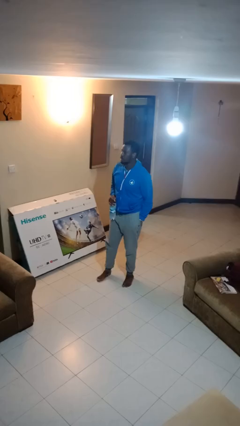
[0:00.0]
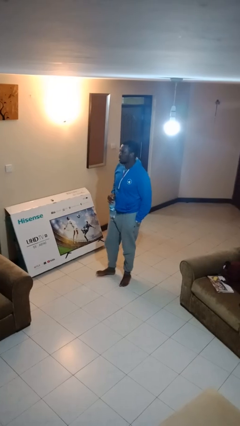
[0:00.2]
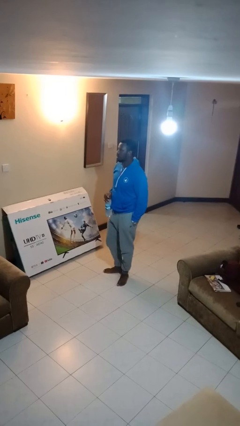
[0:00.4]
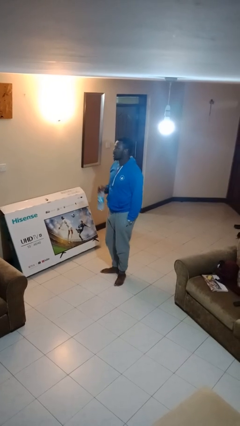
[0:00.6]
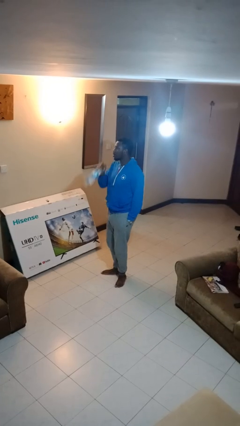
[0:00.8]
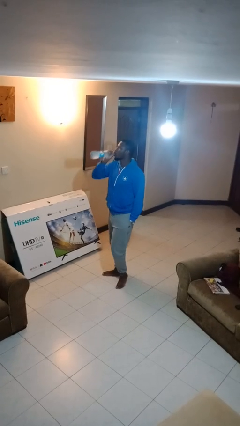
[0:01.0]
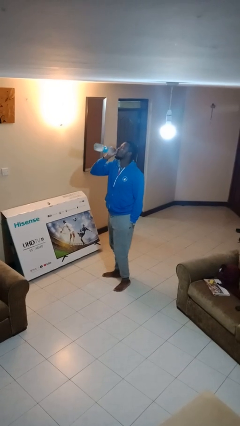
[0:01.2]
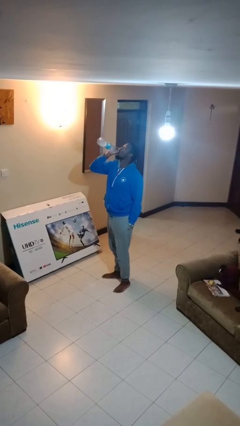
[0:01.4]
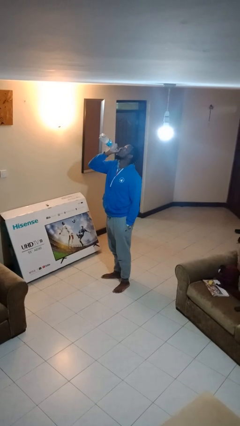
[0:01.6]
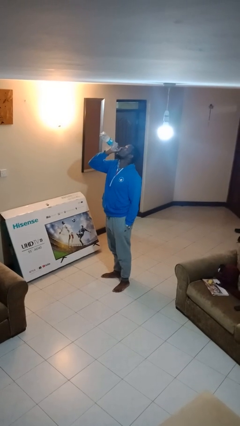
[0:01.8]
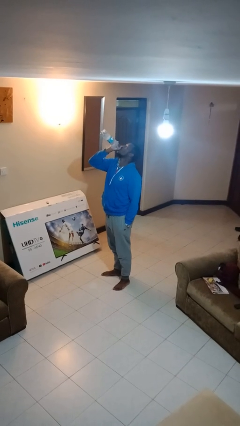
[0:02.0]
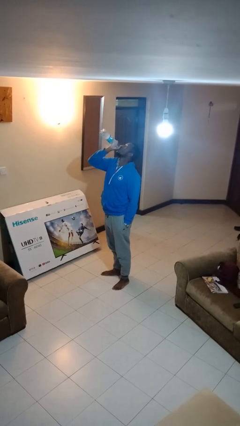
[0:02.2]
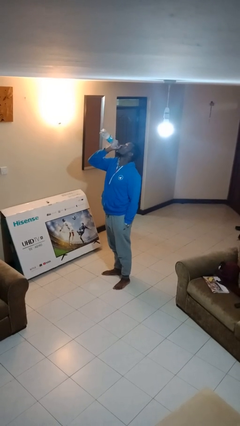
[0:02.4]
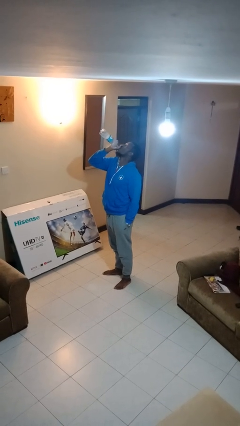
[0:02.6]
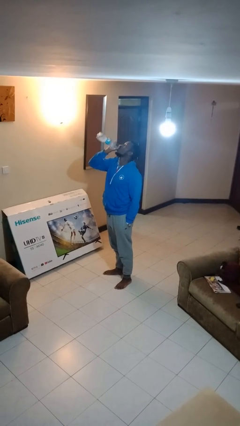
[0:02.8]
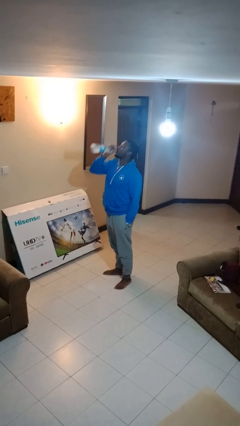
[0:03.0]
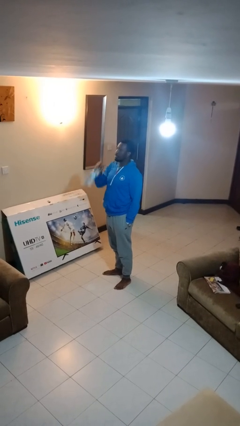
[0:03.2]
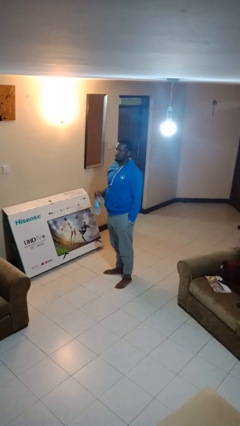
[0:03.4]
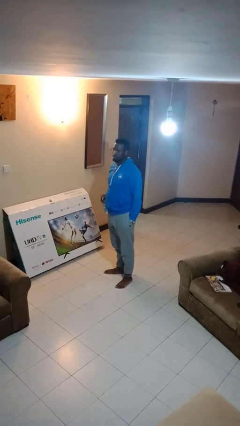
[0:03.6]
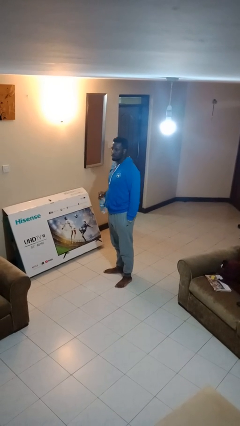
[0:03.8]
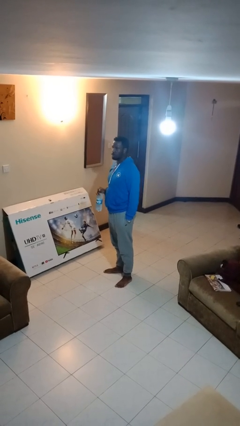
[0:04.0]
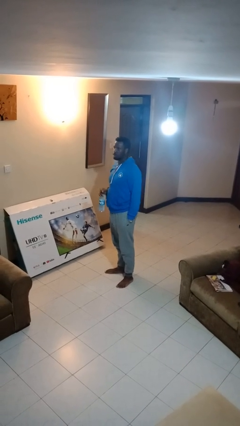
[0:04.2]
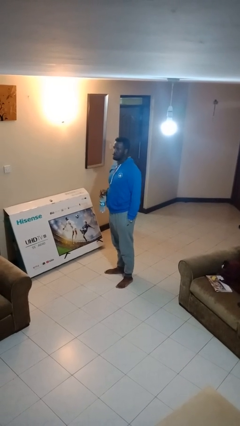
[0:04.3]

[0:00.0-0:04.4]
person drinks from bottle

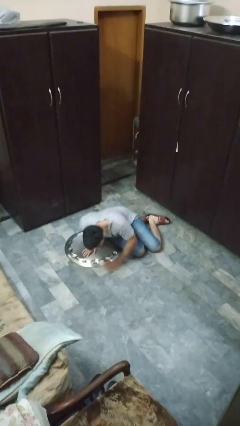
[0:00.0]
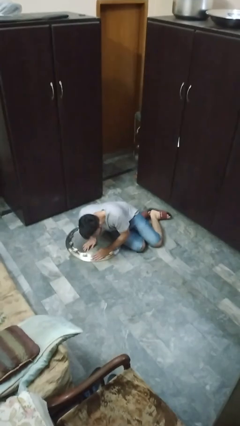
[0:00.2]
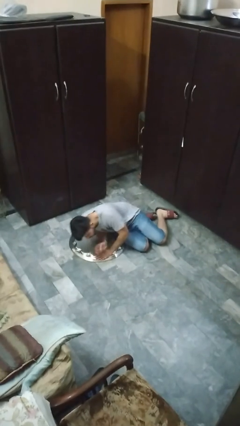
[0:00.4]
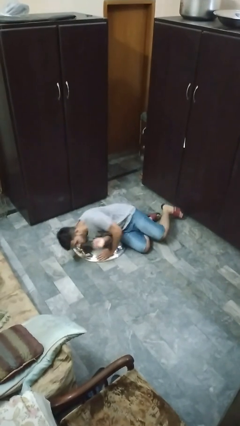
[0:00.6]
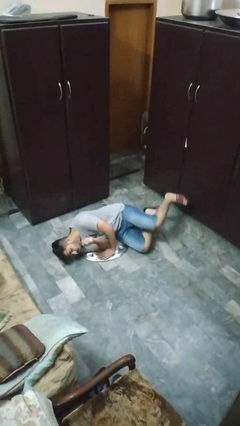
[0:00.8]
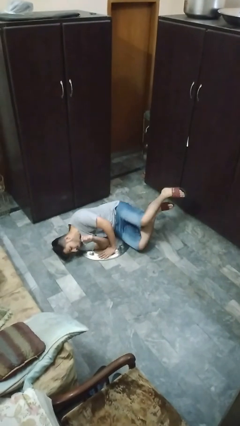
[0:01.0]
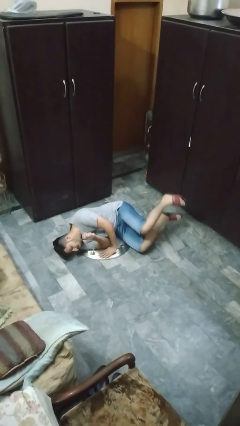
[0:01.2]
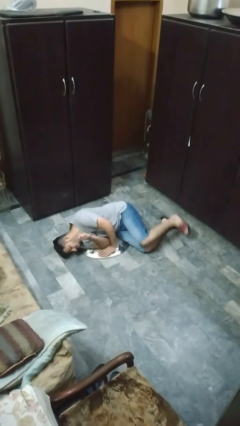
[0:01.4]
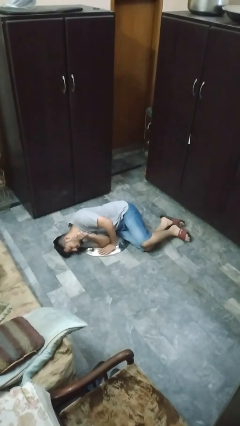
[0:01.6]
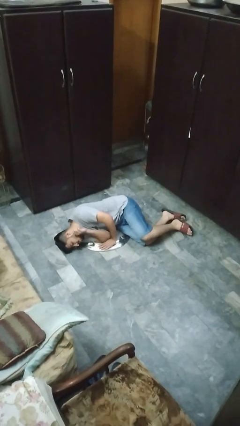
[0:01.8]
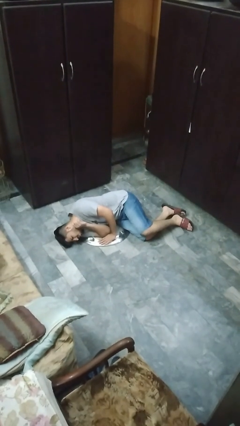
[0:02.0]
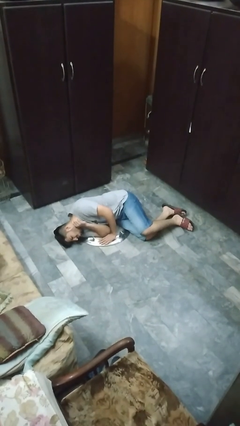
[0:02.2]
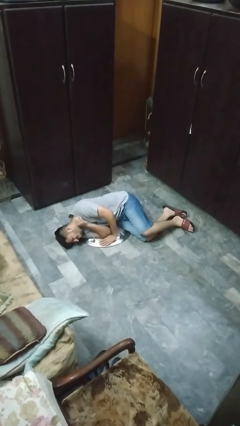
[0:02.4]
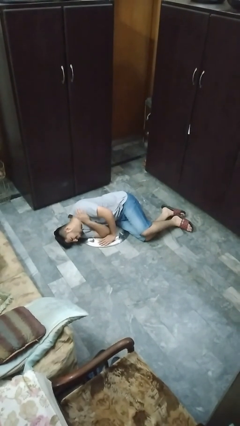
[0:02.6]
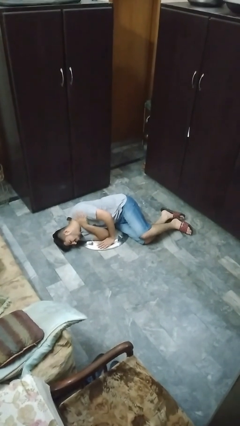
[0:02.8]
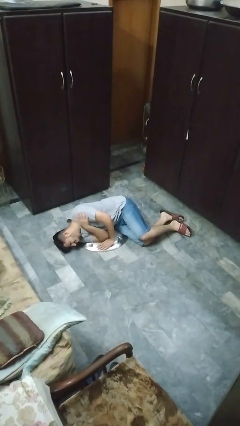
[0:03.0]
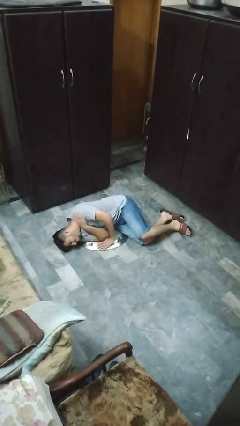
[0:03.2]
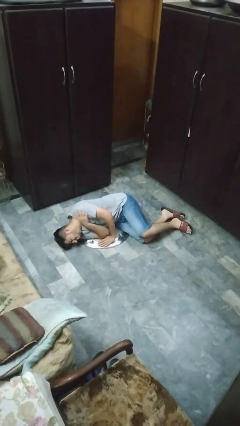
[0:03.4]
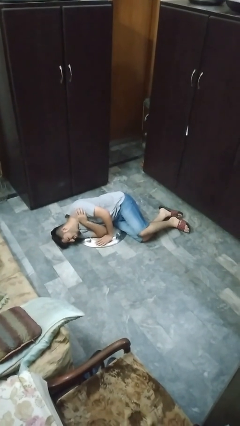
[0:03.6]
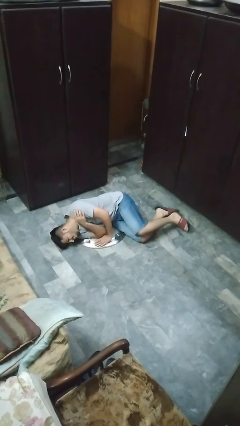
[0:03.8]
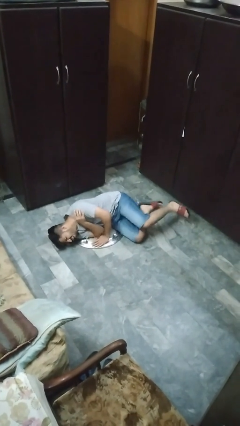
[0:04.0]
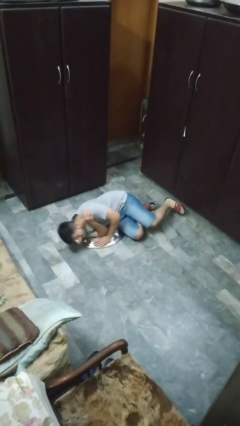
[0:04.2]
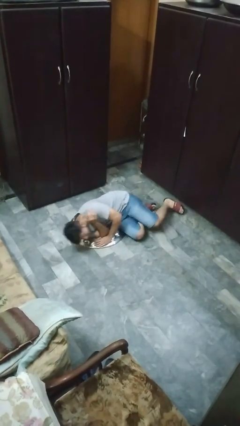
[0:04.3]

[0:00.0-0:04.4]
person lies down on floor

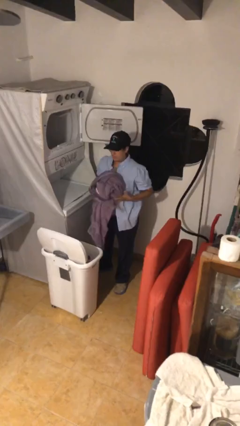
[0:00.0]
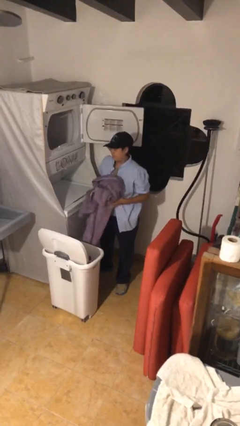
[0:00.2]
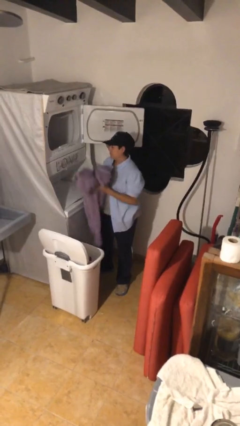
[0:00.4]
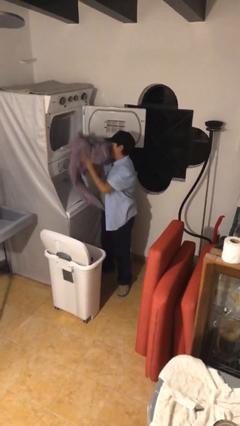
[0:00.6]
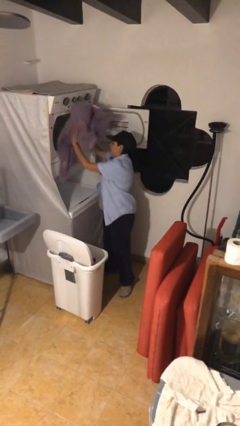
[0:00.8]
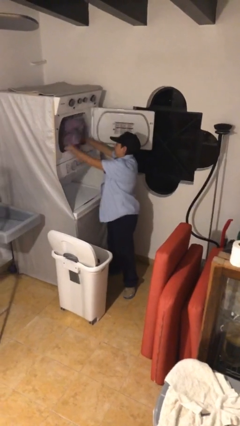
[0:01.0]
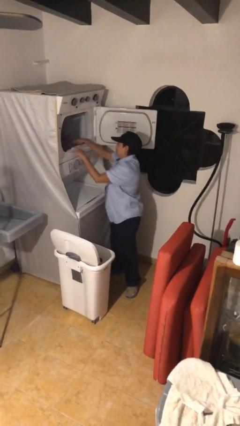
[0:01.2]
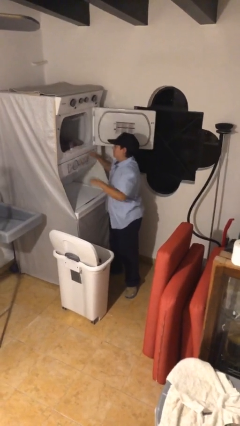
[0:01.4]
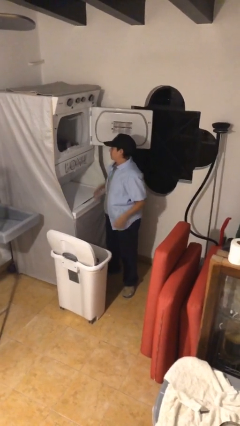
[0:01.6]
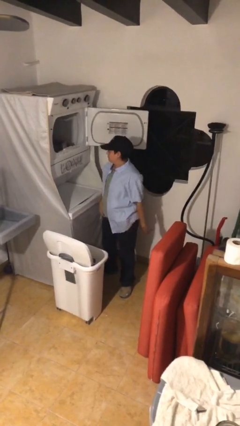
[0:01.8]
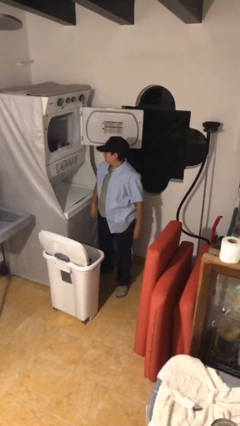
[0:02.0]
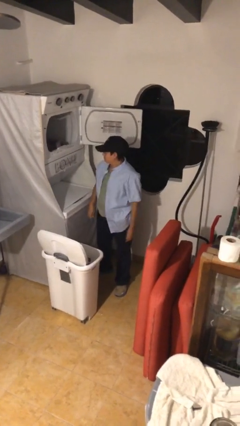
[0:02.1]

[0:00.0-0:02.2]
person loads dryer

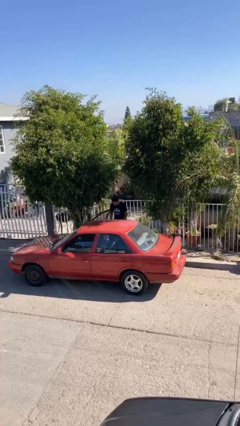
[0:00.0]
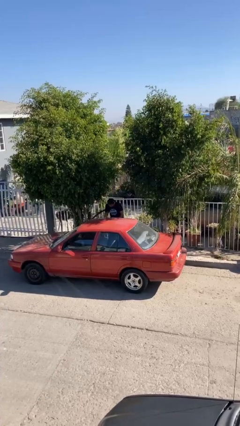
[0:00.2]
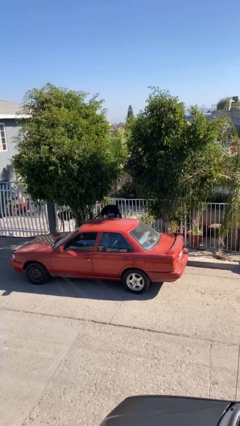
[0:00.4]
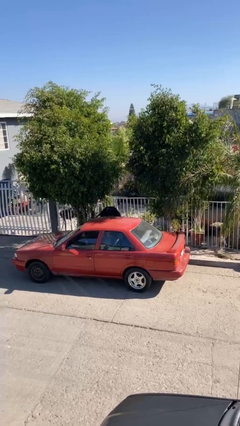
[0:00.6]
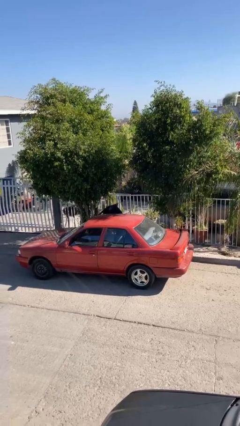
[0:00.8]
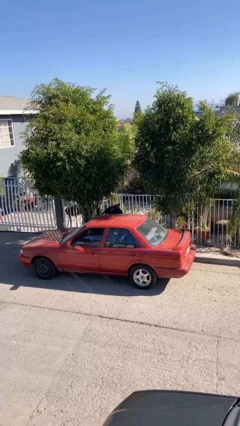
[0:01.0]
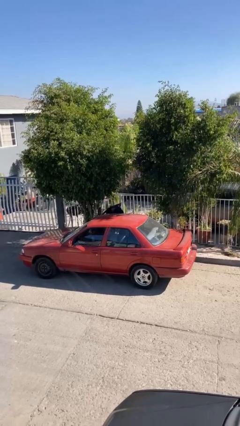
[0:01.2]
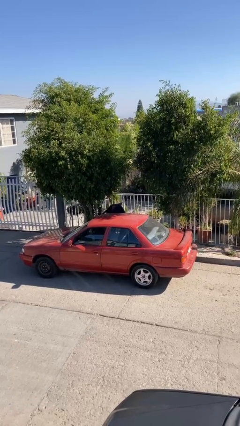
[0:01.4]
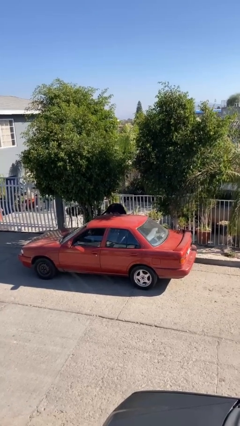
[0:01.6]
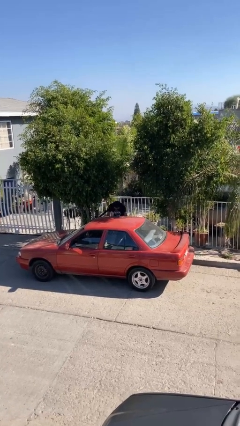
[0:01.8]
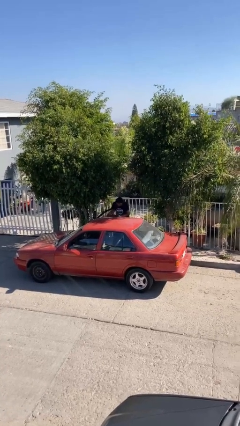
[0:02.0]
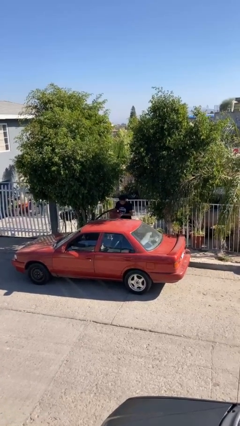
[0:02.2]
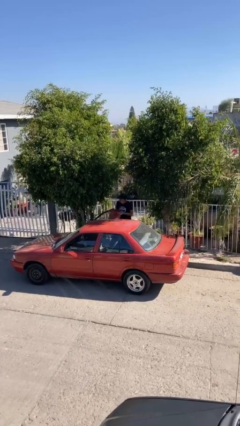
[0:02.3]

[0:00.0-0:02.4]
person unloads car

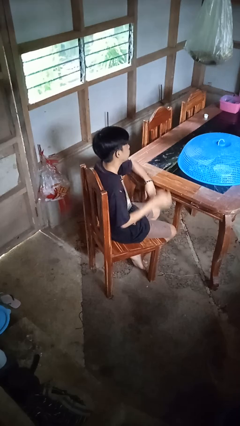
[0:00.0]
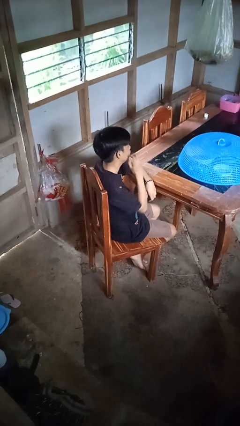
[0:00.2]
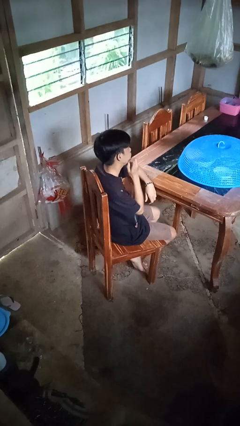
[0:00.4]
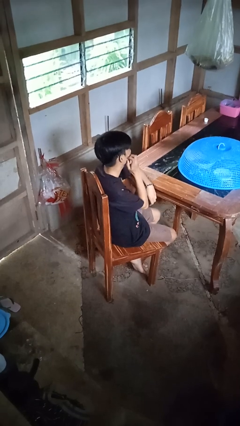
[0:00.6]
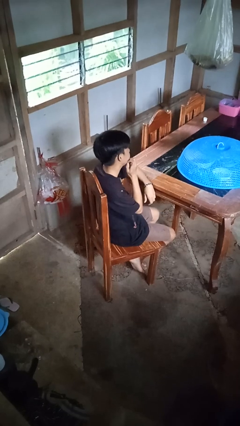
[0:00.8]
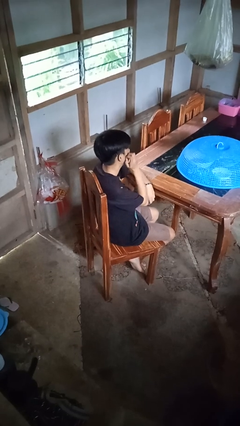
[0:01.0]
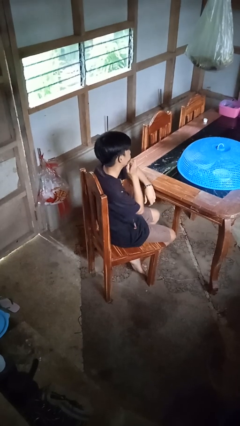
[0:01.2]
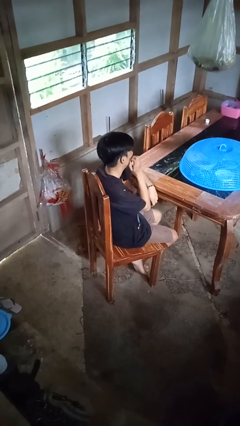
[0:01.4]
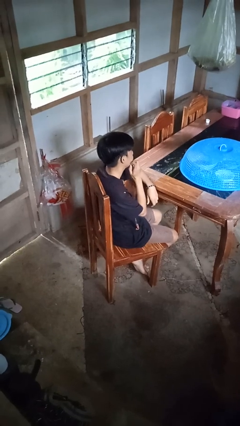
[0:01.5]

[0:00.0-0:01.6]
person scratches face

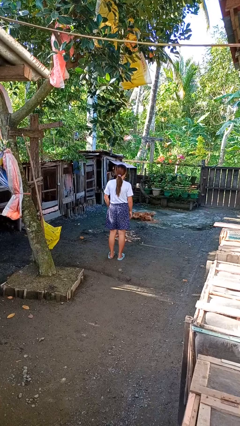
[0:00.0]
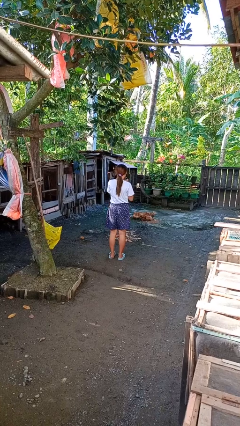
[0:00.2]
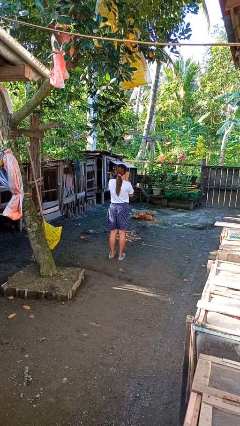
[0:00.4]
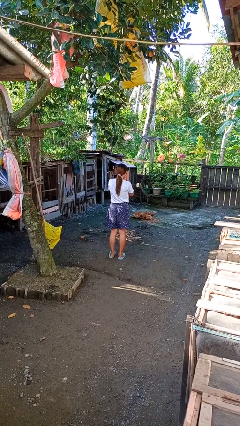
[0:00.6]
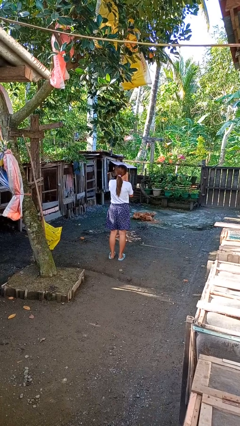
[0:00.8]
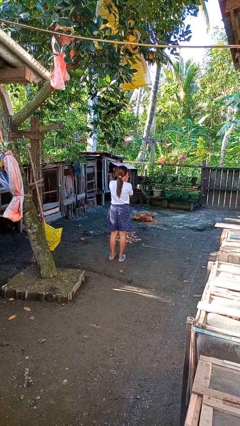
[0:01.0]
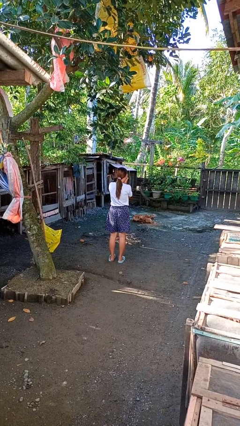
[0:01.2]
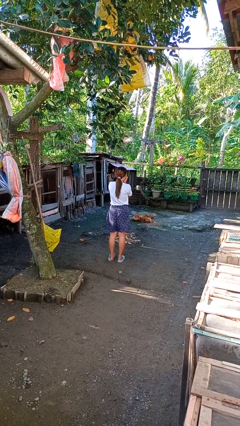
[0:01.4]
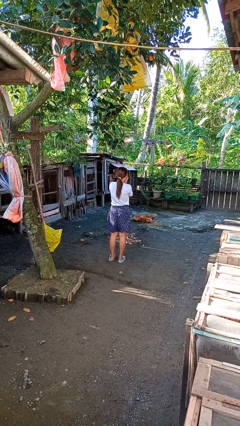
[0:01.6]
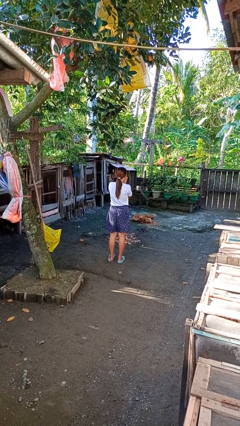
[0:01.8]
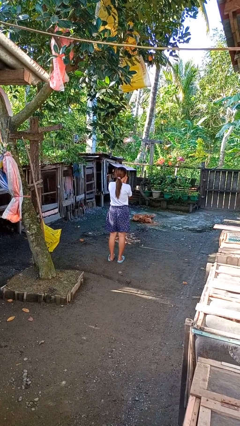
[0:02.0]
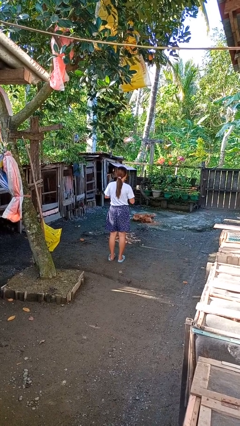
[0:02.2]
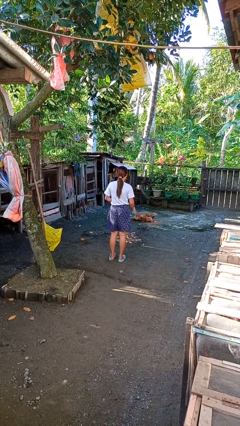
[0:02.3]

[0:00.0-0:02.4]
person blows into hands

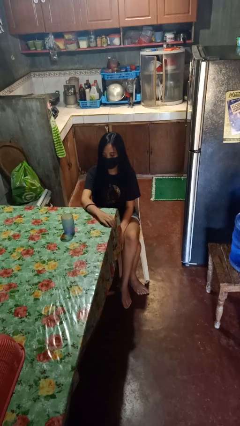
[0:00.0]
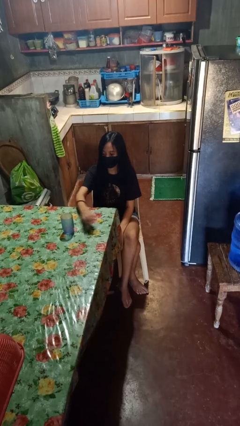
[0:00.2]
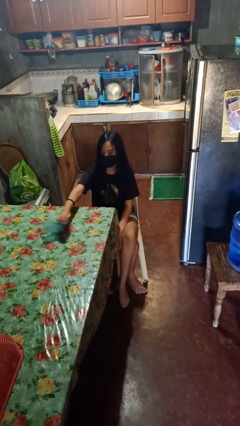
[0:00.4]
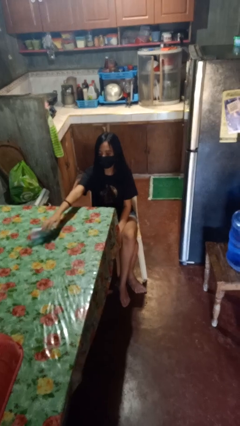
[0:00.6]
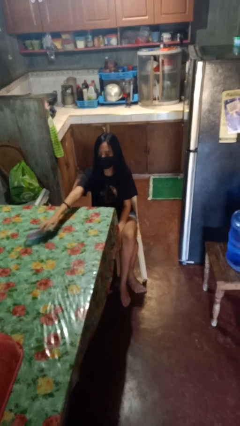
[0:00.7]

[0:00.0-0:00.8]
person knocks over glass
